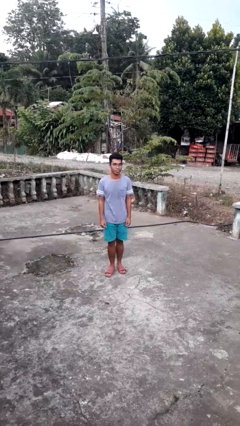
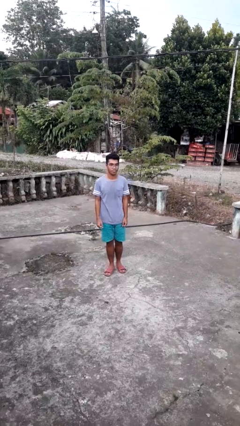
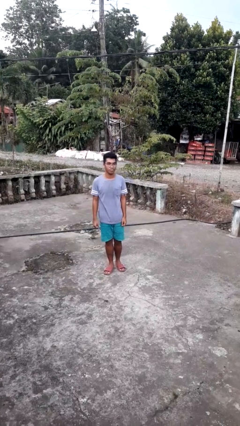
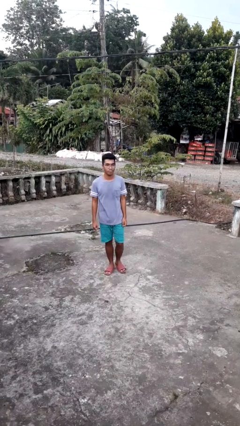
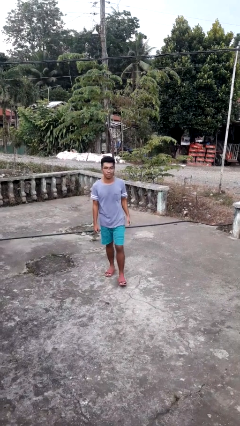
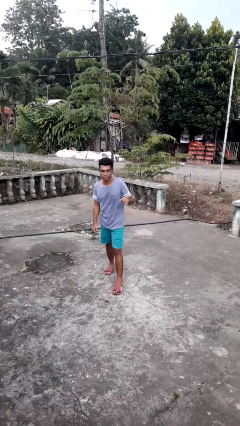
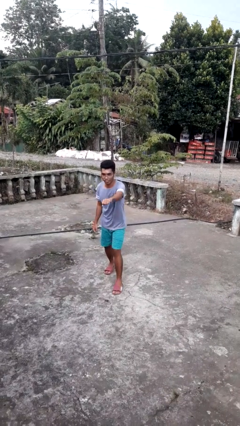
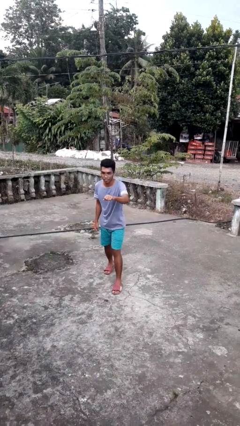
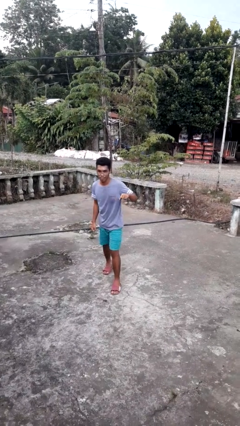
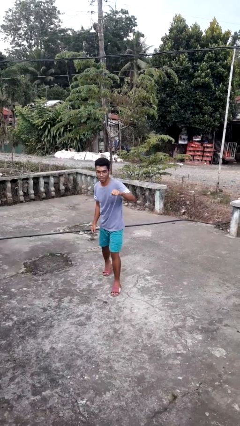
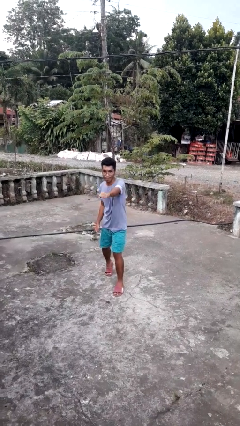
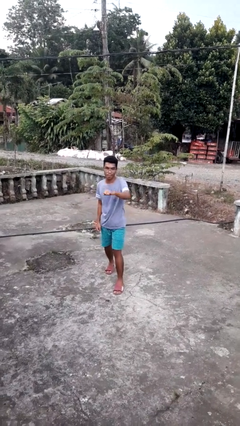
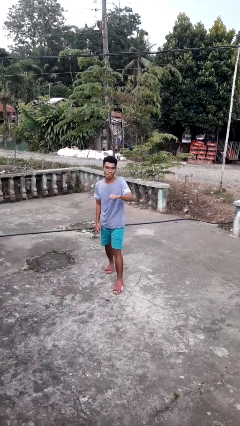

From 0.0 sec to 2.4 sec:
person punches

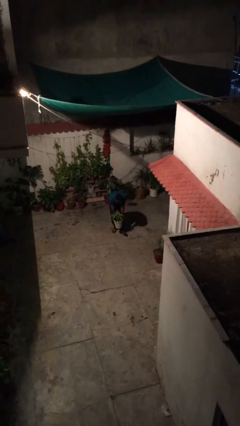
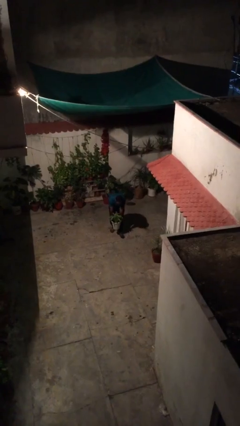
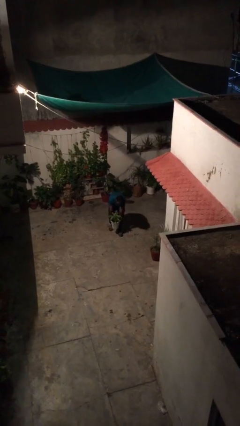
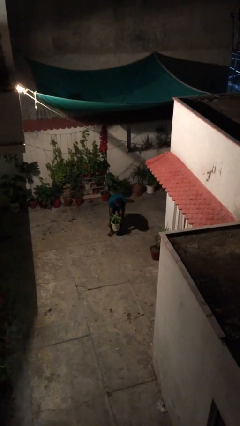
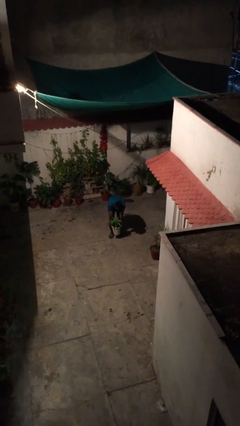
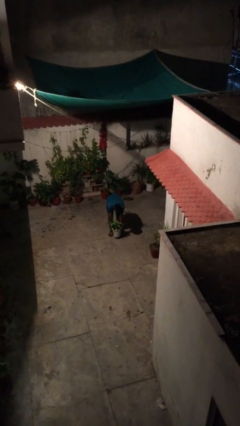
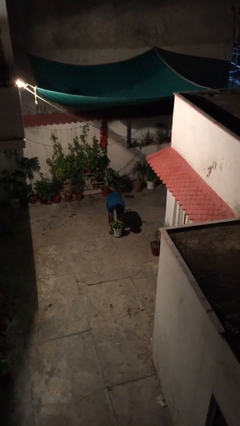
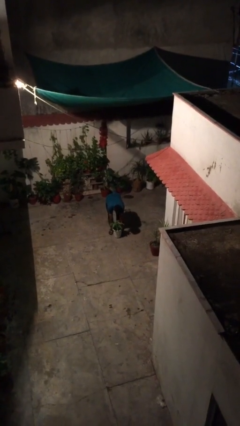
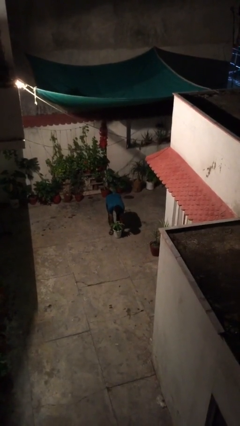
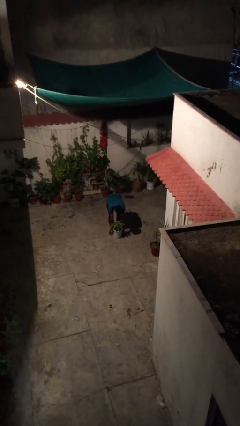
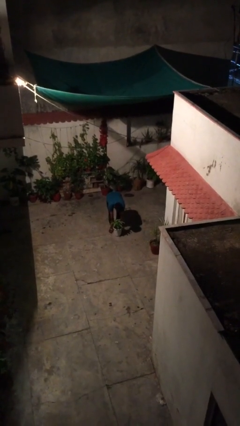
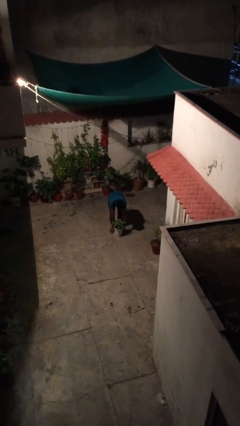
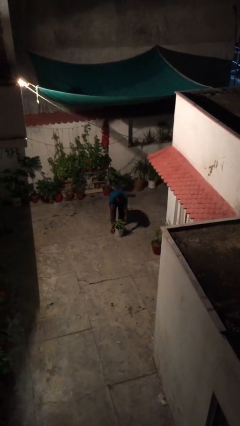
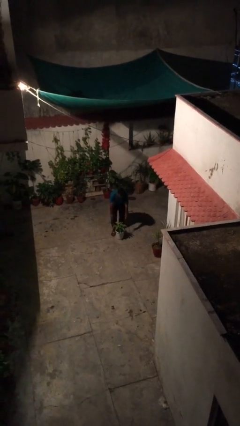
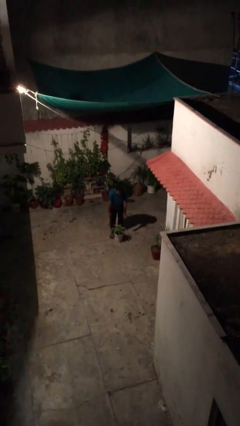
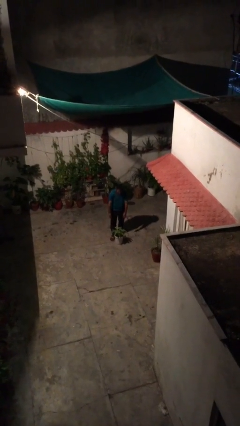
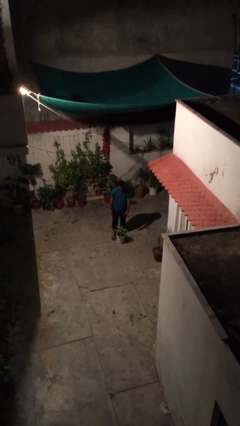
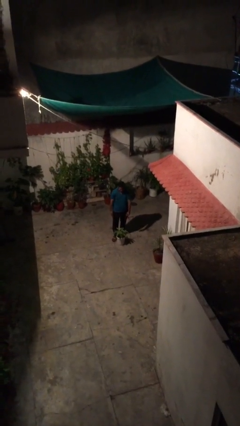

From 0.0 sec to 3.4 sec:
person puts down object on floor

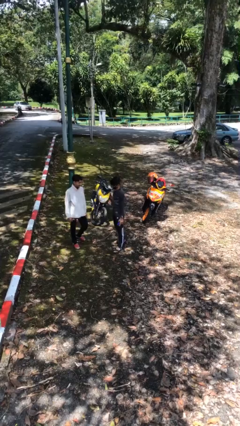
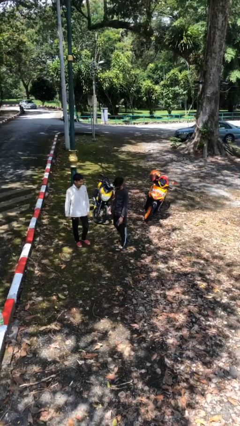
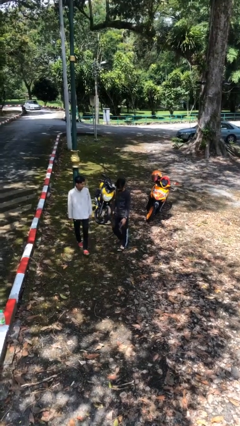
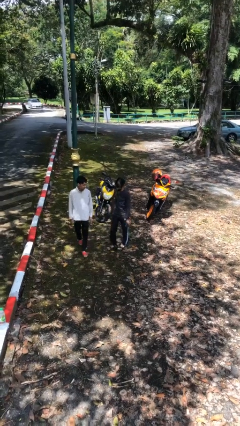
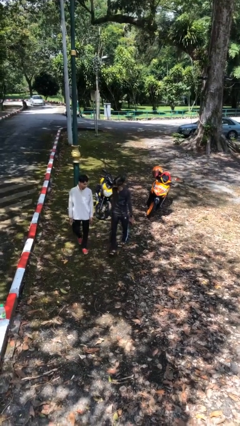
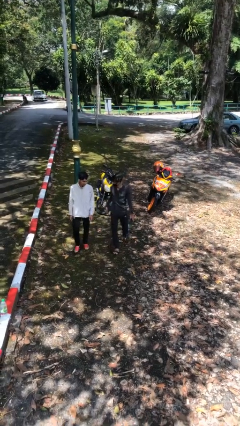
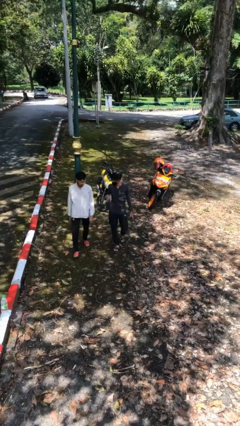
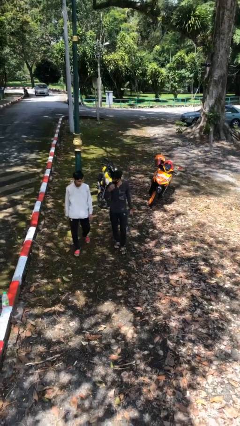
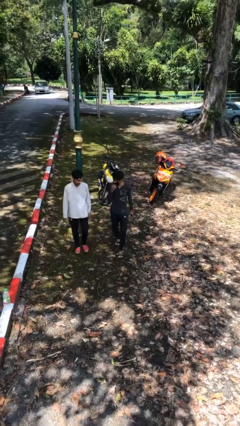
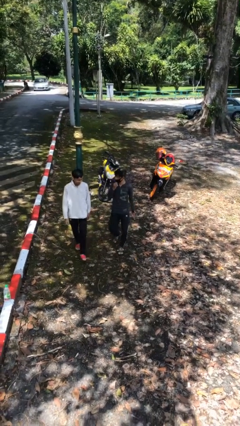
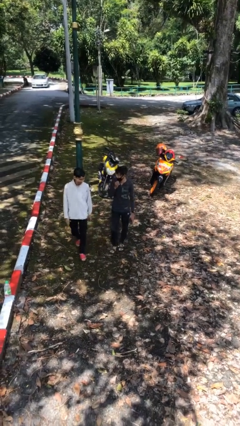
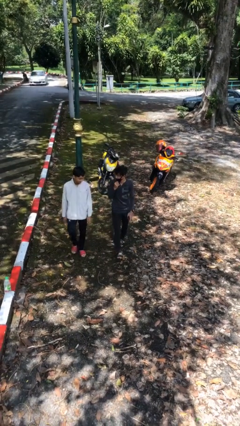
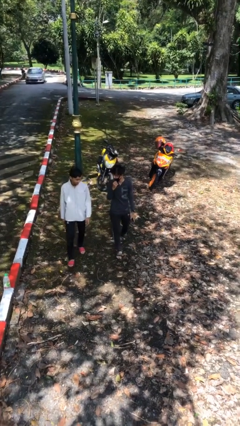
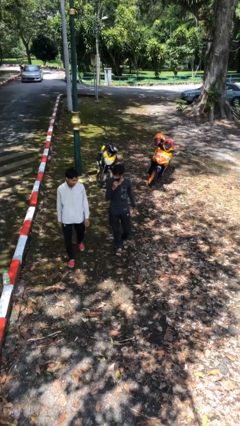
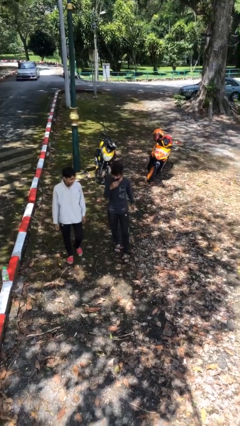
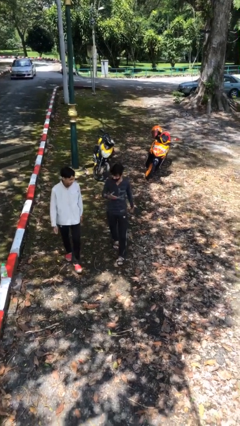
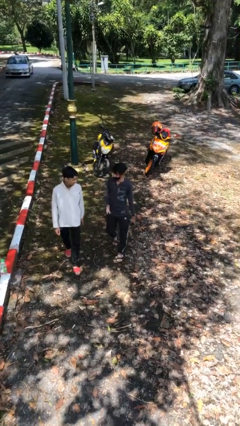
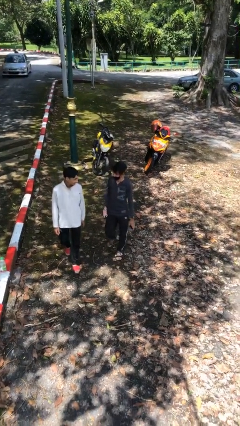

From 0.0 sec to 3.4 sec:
person talks to person

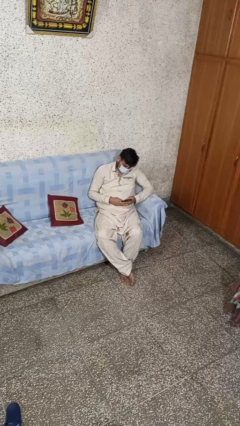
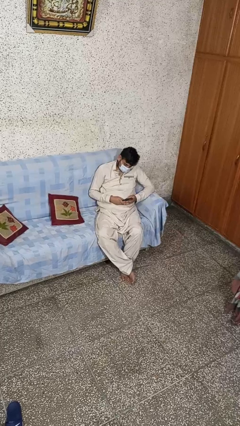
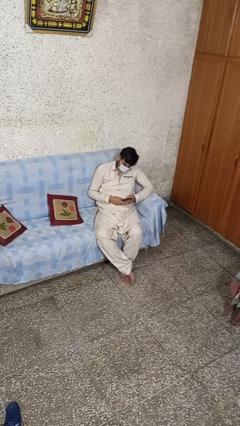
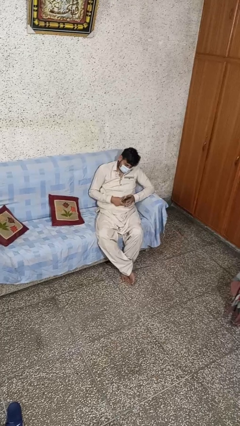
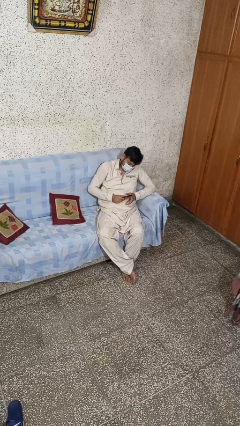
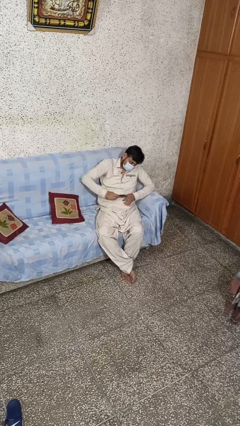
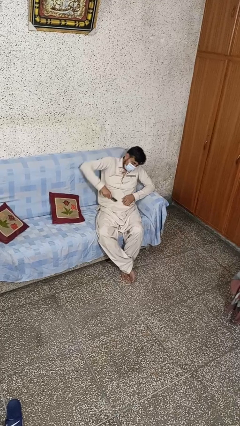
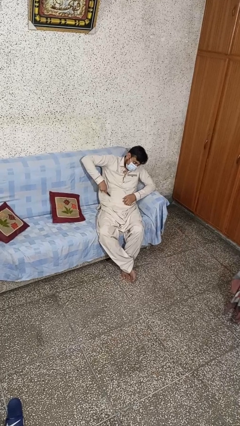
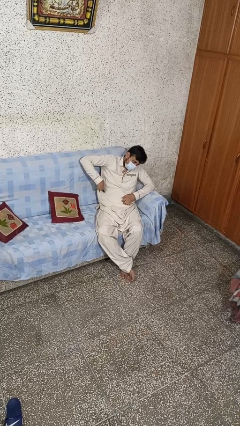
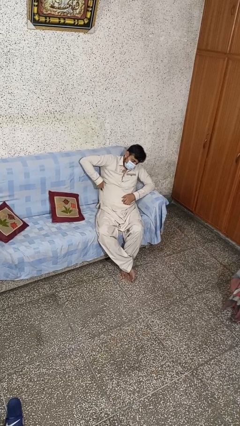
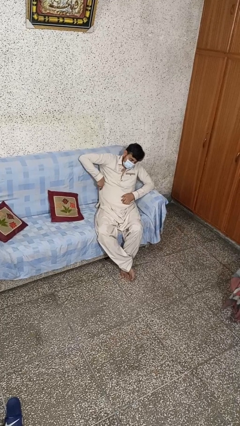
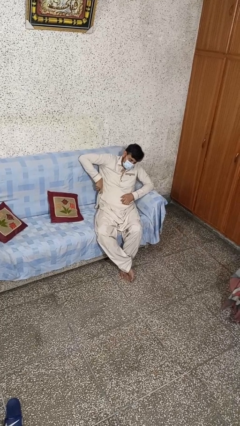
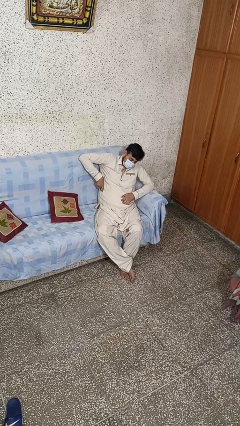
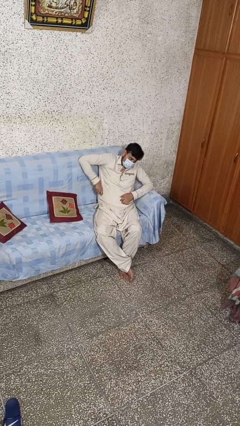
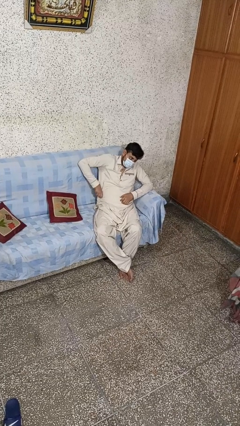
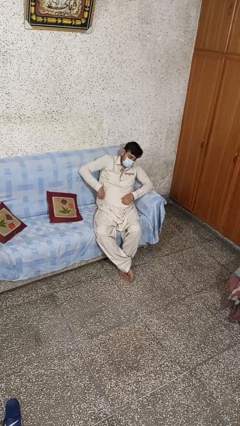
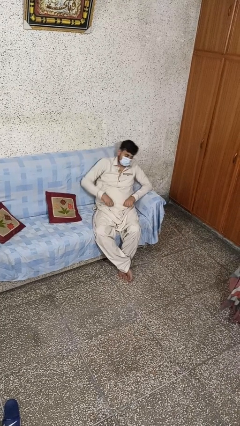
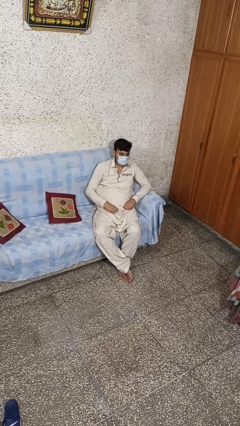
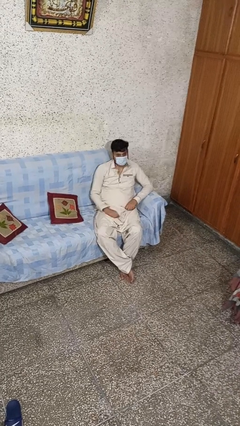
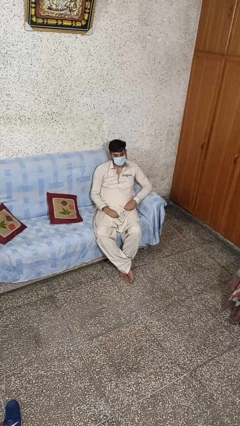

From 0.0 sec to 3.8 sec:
person puts phone into pocket

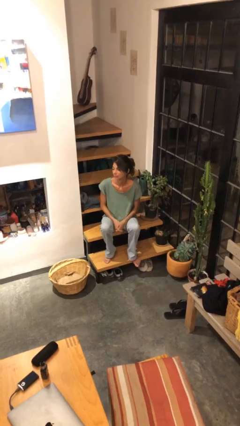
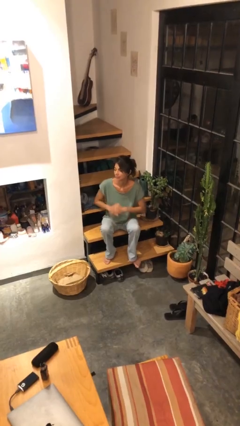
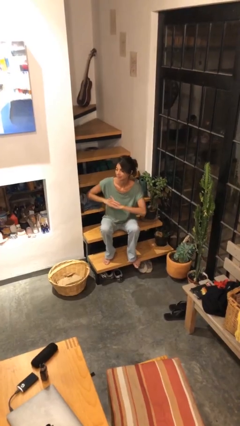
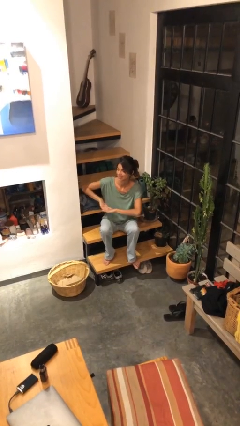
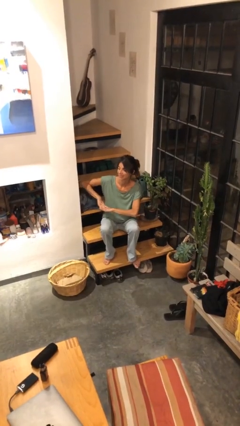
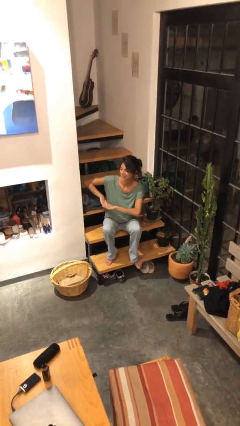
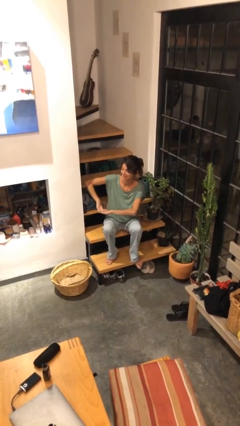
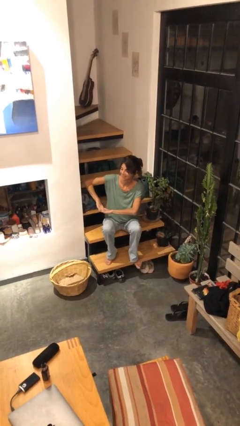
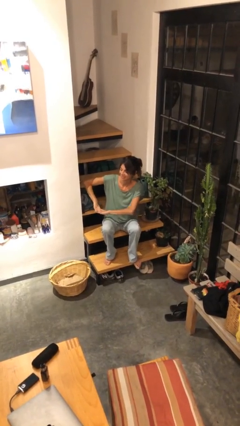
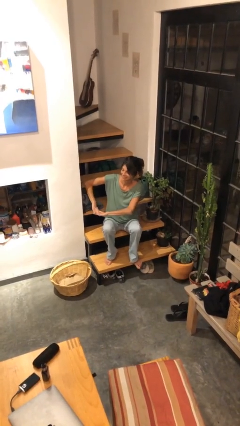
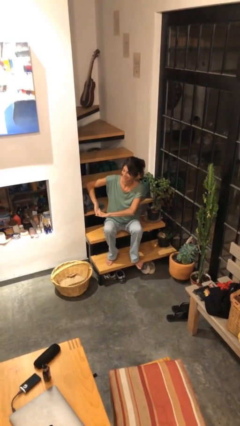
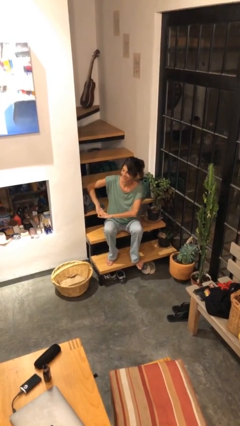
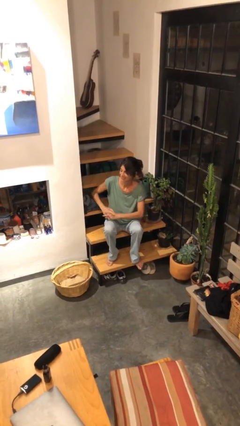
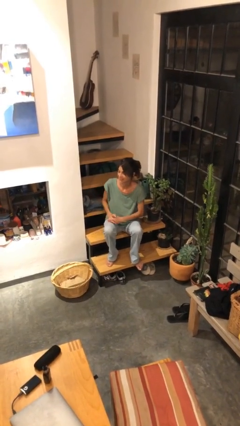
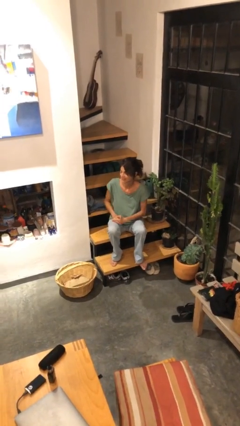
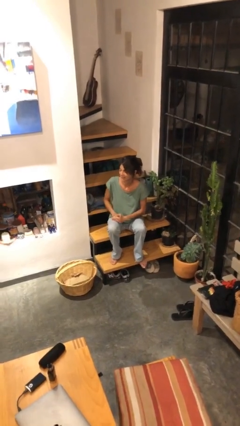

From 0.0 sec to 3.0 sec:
person cracks knuckles

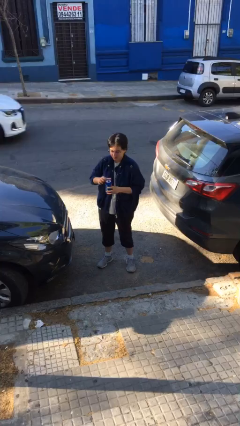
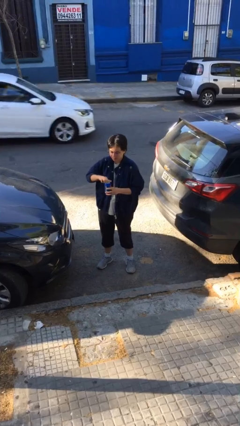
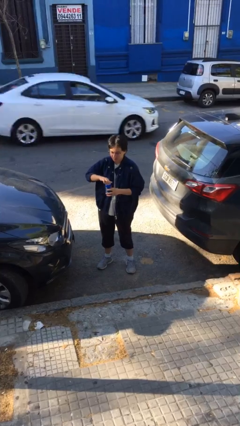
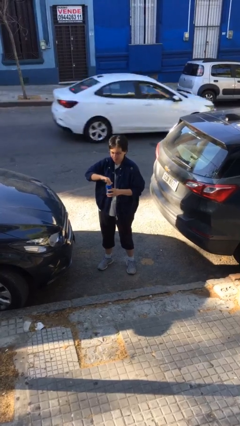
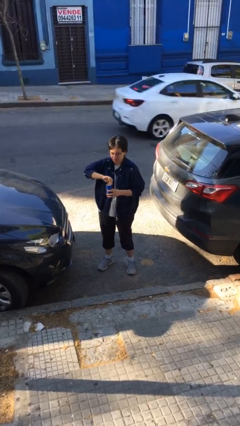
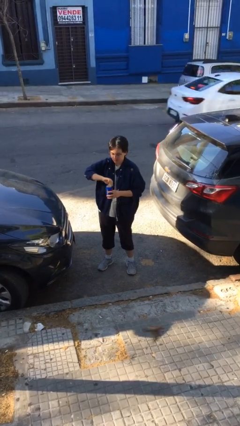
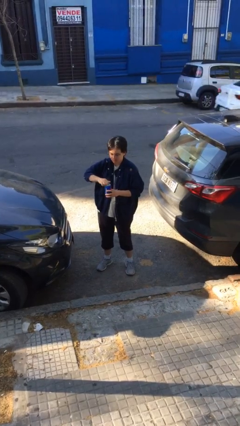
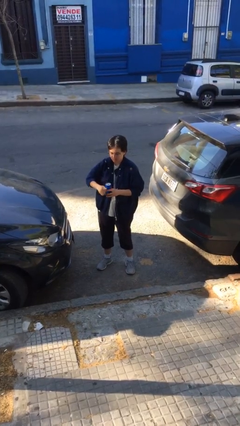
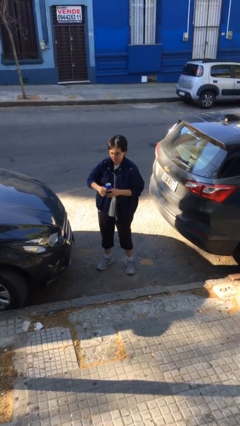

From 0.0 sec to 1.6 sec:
person opens beverage can
